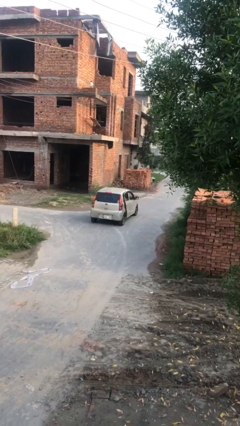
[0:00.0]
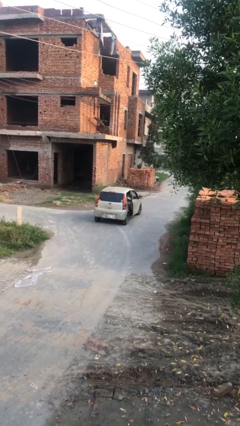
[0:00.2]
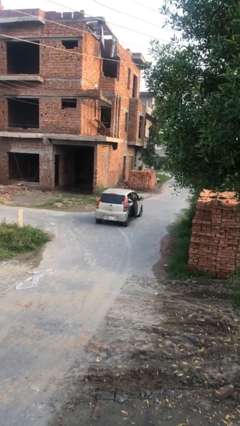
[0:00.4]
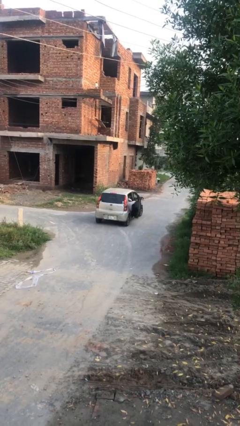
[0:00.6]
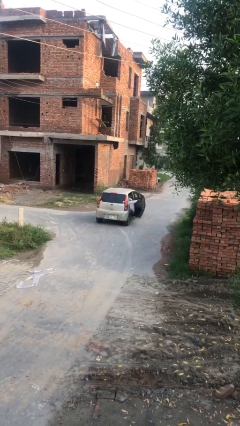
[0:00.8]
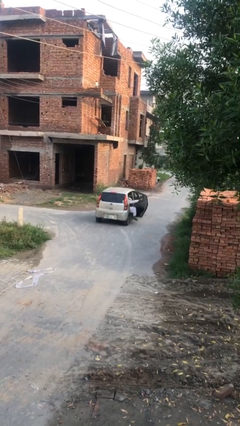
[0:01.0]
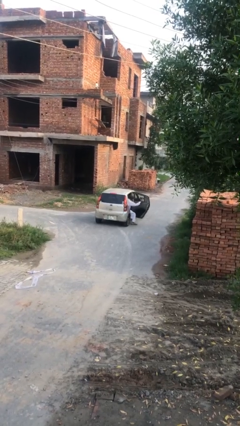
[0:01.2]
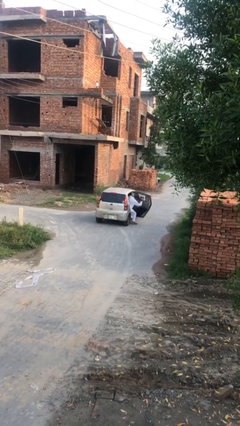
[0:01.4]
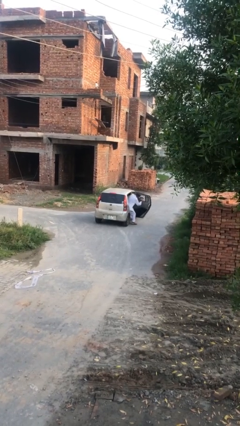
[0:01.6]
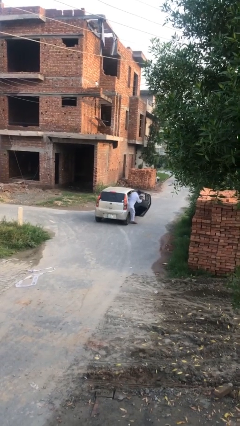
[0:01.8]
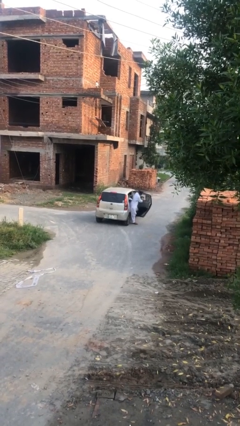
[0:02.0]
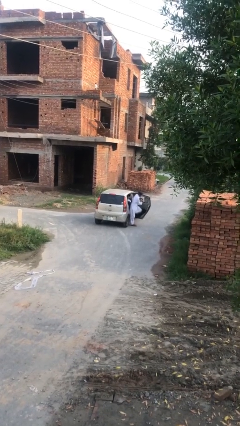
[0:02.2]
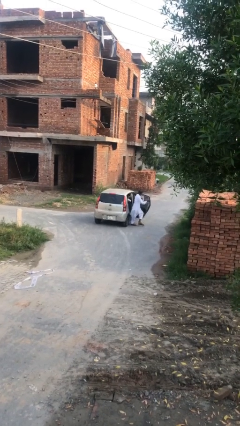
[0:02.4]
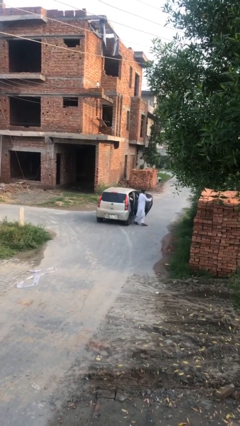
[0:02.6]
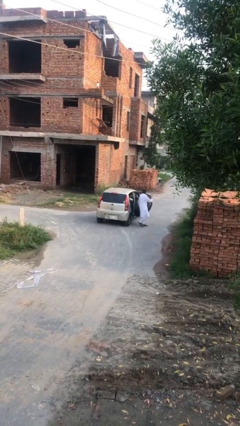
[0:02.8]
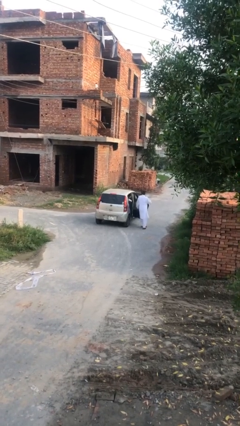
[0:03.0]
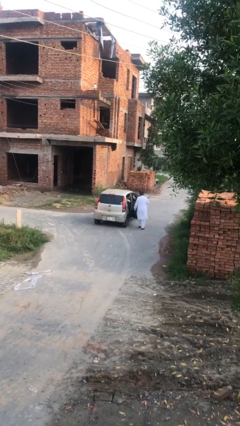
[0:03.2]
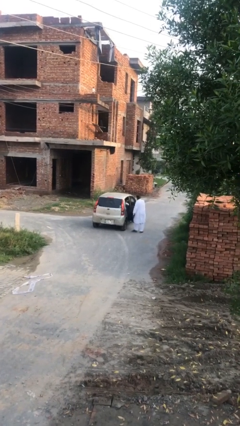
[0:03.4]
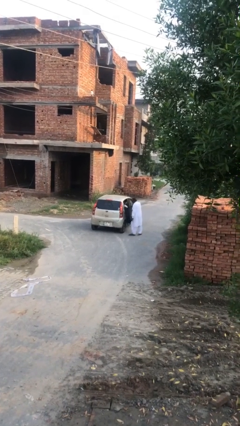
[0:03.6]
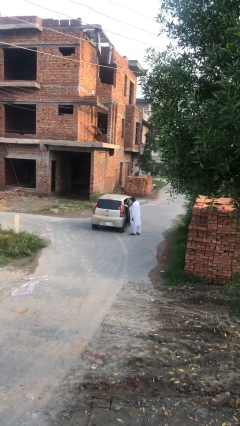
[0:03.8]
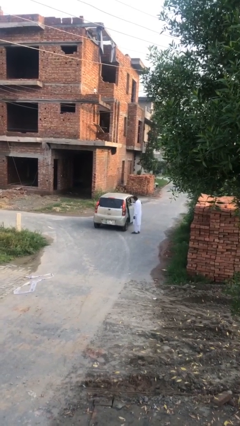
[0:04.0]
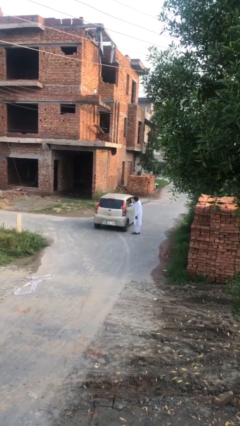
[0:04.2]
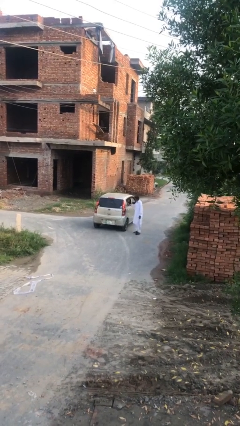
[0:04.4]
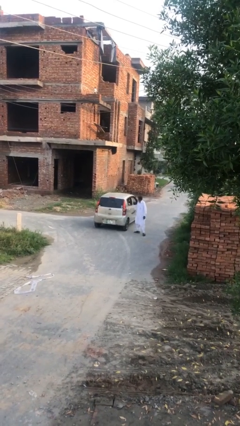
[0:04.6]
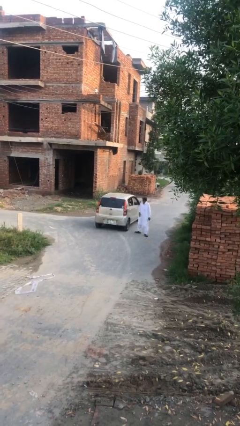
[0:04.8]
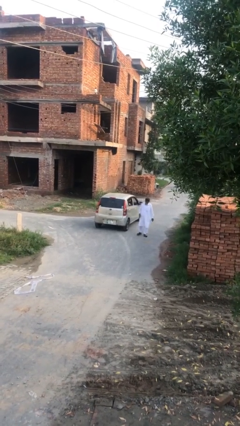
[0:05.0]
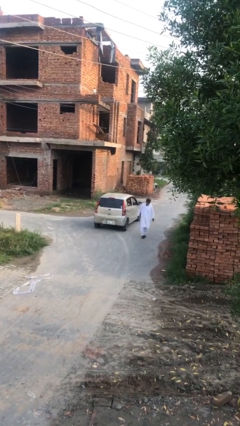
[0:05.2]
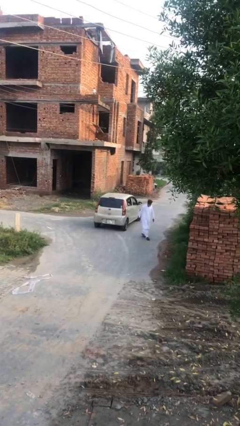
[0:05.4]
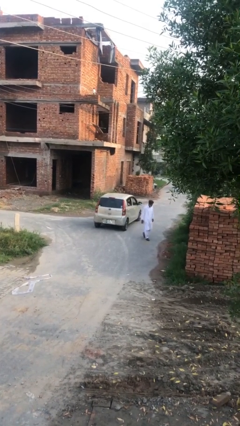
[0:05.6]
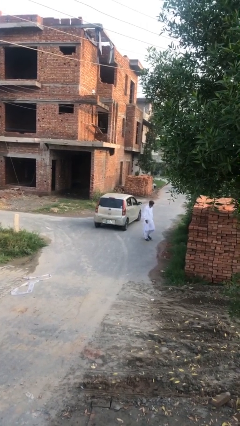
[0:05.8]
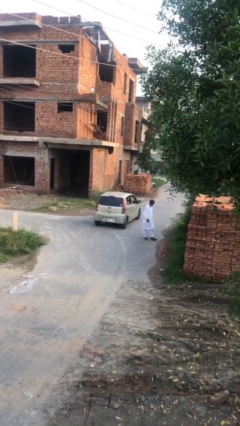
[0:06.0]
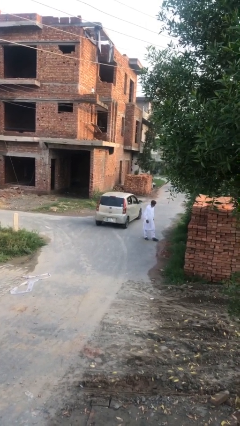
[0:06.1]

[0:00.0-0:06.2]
car drops off person

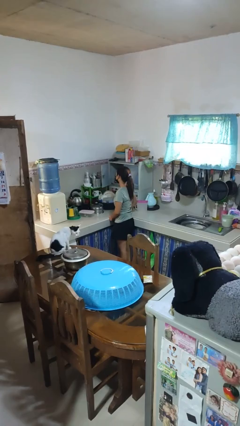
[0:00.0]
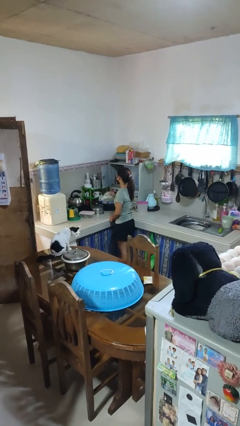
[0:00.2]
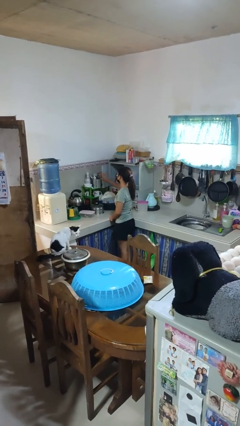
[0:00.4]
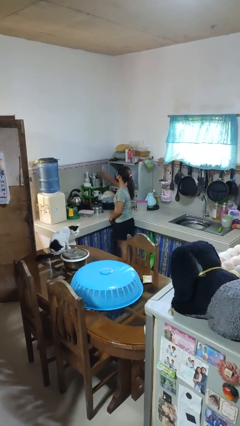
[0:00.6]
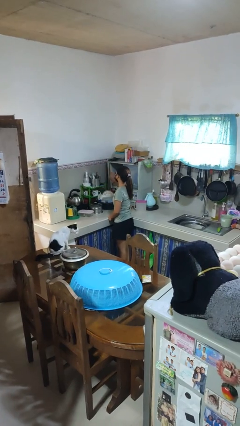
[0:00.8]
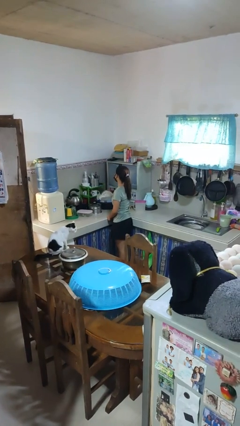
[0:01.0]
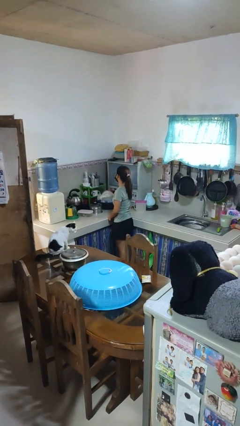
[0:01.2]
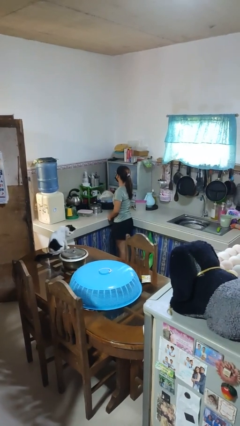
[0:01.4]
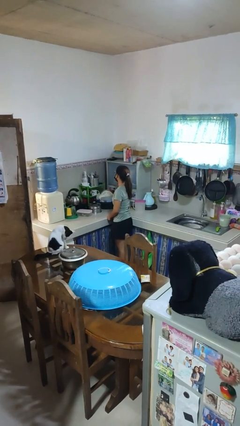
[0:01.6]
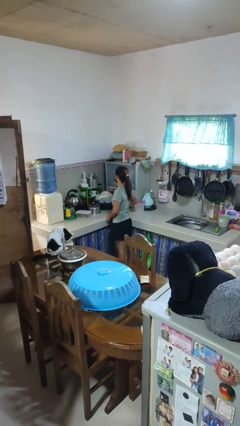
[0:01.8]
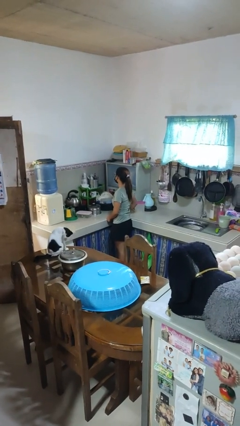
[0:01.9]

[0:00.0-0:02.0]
person closes kitchen drawer

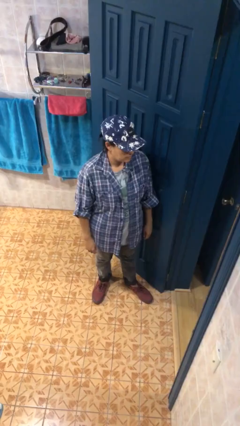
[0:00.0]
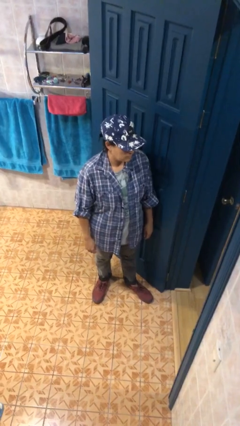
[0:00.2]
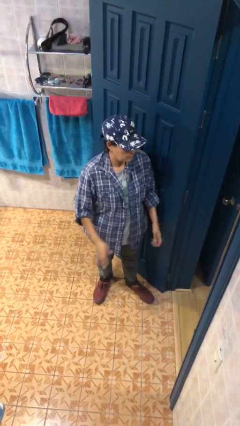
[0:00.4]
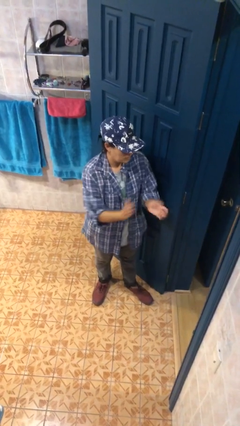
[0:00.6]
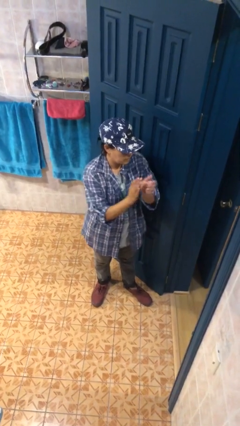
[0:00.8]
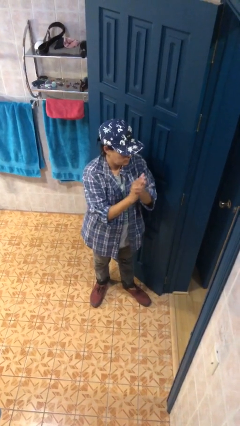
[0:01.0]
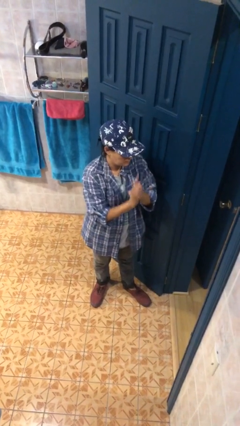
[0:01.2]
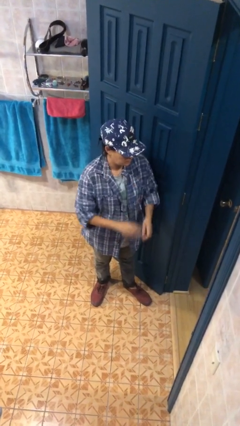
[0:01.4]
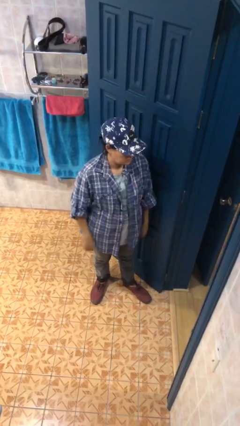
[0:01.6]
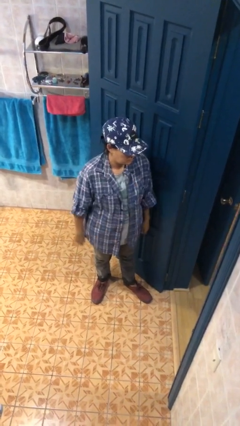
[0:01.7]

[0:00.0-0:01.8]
person claps hands

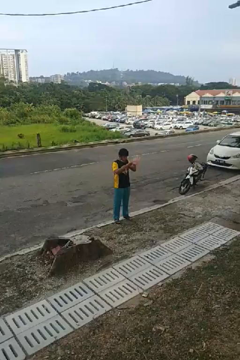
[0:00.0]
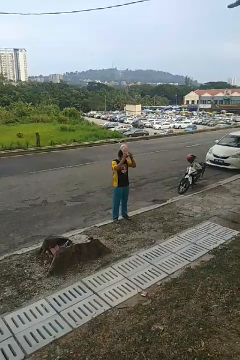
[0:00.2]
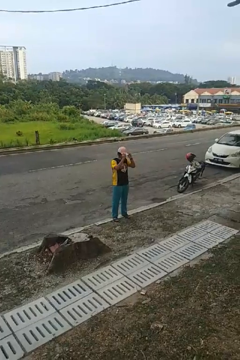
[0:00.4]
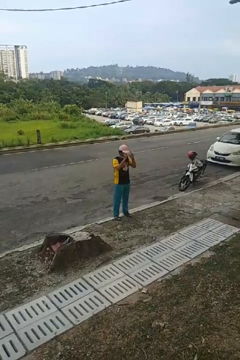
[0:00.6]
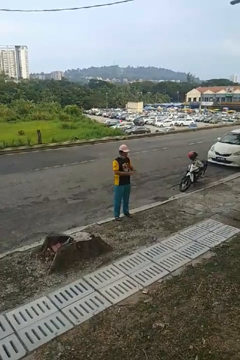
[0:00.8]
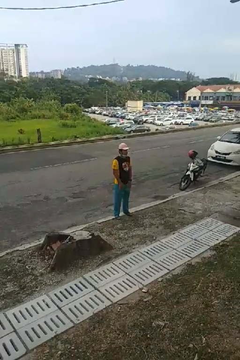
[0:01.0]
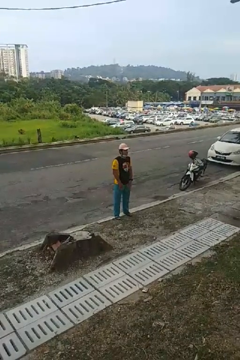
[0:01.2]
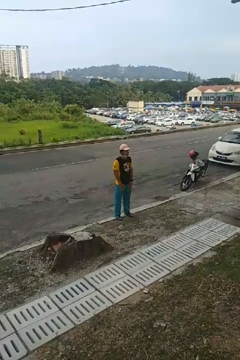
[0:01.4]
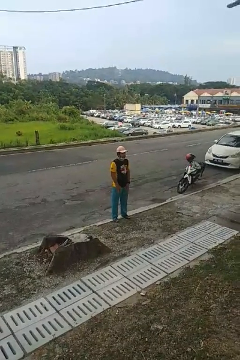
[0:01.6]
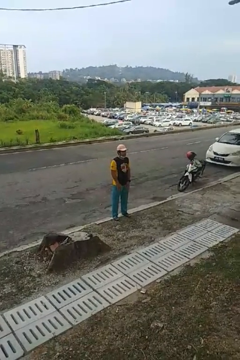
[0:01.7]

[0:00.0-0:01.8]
person puts on hat

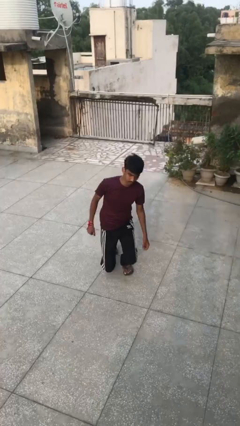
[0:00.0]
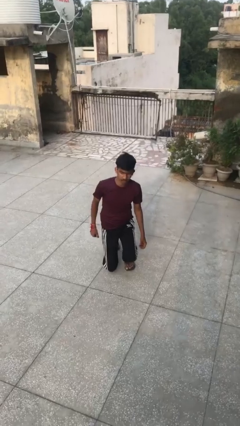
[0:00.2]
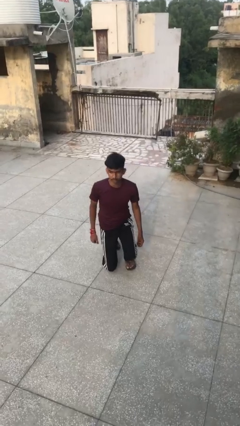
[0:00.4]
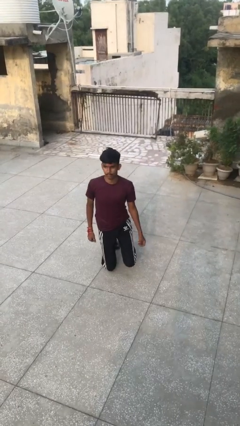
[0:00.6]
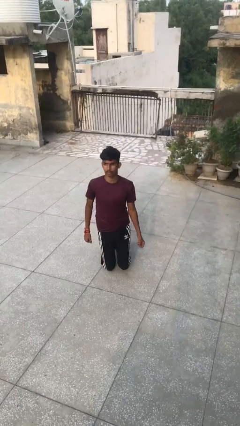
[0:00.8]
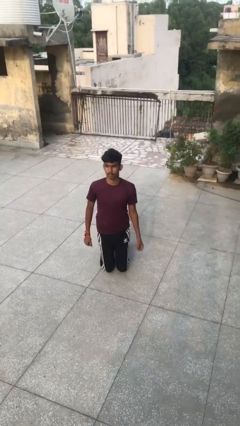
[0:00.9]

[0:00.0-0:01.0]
person kneels

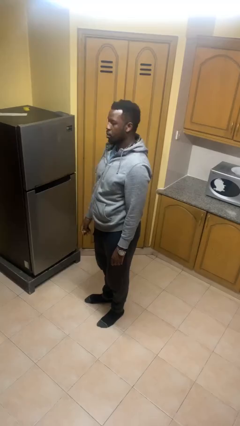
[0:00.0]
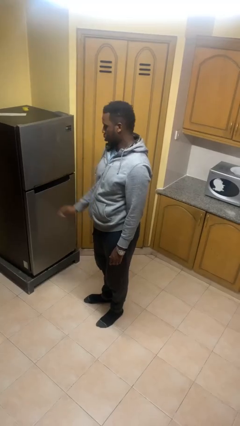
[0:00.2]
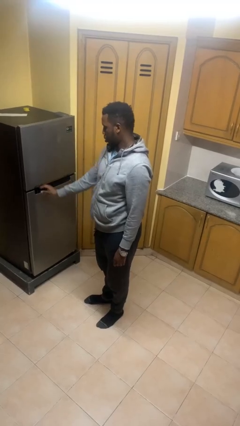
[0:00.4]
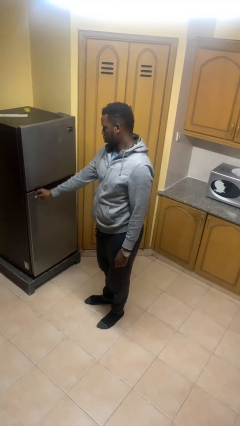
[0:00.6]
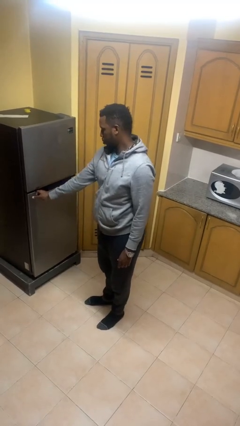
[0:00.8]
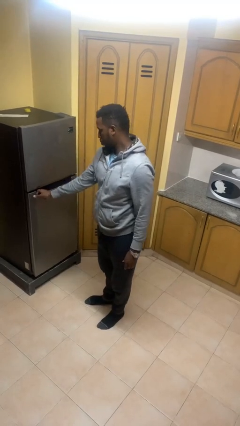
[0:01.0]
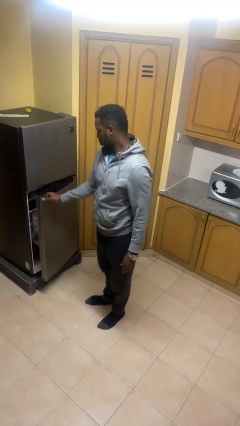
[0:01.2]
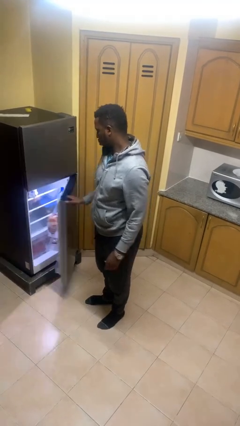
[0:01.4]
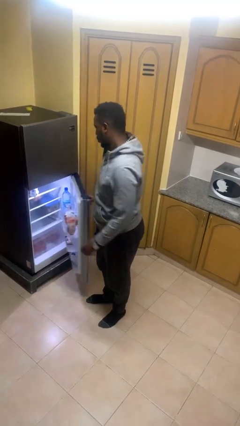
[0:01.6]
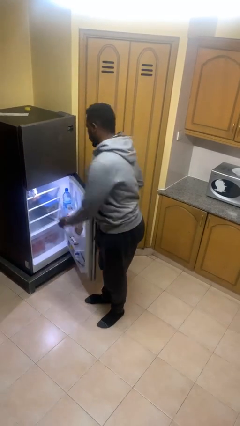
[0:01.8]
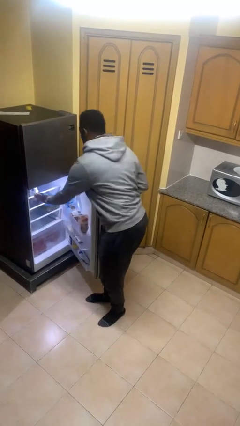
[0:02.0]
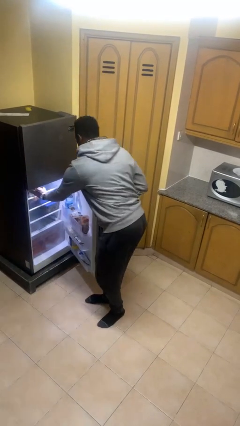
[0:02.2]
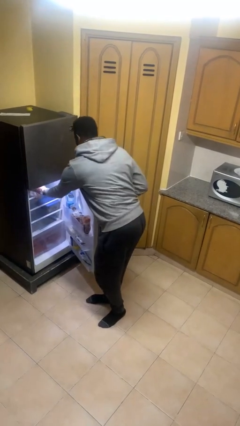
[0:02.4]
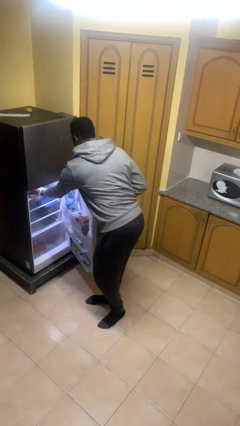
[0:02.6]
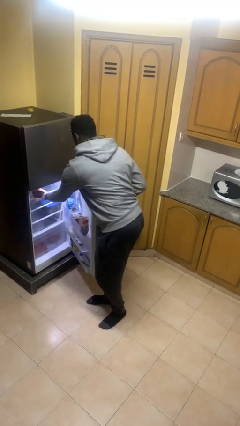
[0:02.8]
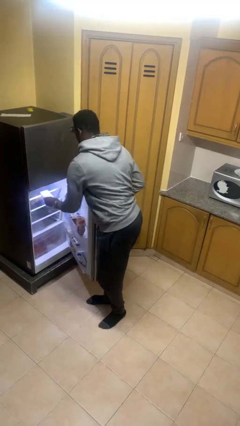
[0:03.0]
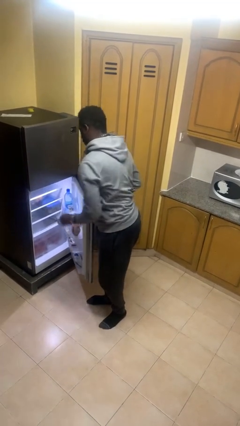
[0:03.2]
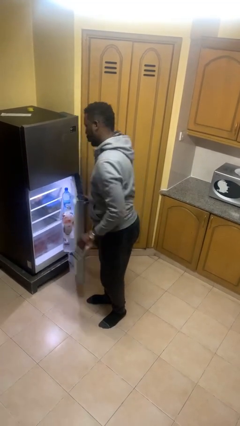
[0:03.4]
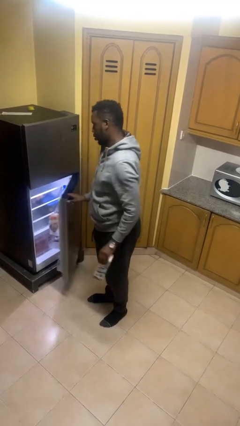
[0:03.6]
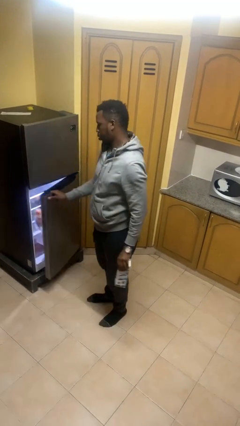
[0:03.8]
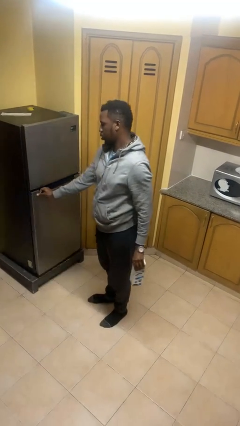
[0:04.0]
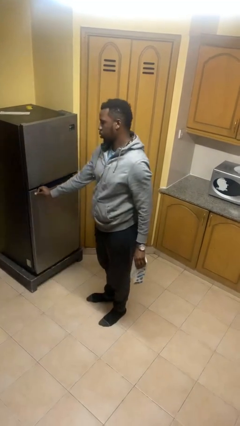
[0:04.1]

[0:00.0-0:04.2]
person takes object from refrigerator

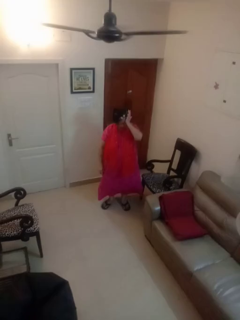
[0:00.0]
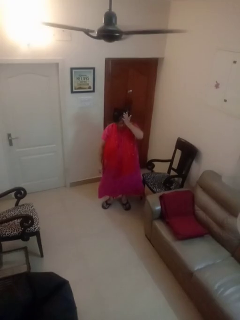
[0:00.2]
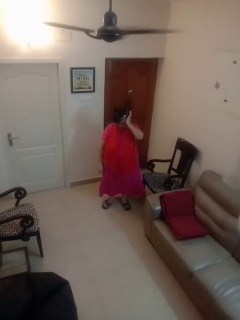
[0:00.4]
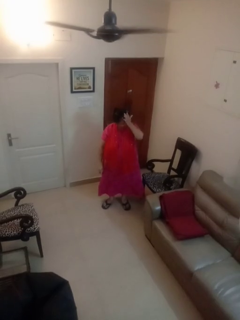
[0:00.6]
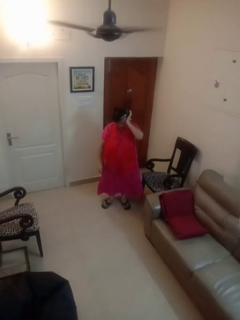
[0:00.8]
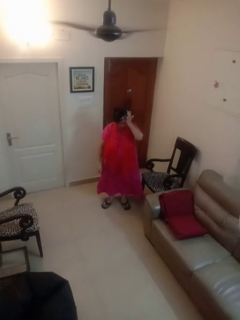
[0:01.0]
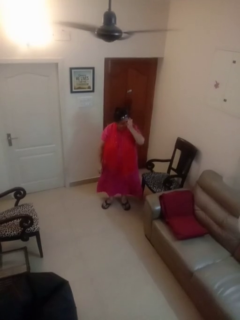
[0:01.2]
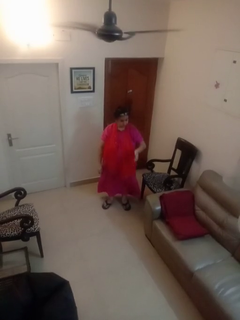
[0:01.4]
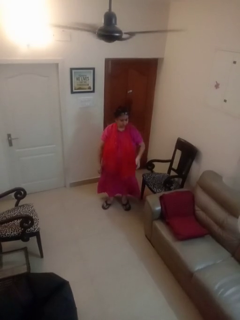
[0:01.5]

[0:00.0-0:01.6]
person rubs eyes
